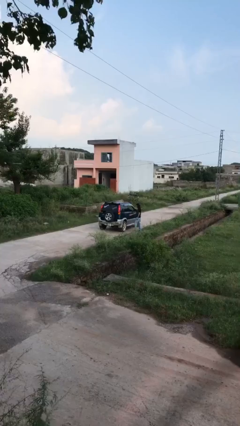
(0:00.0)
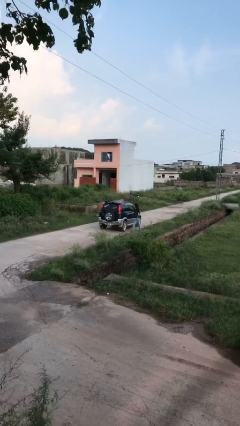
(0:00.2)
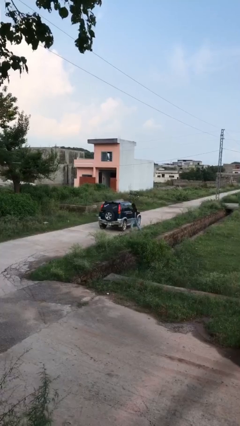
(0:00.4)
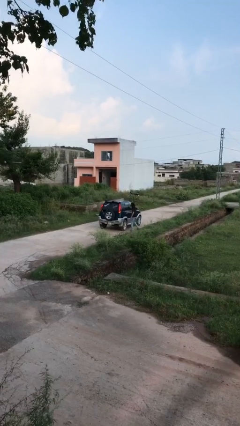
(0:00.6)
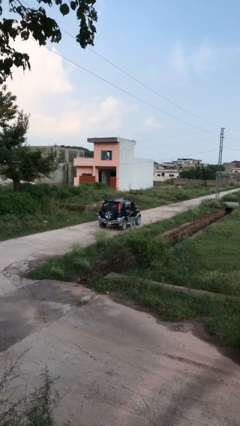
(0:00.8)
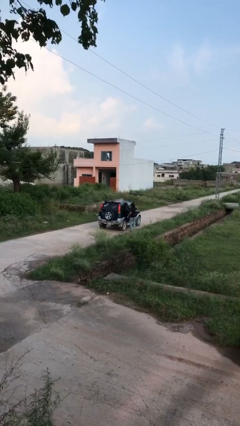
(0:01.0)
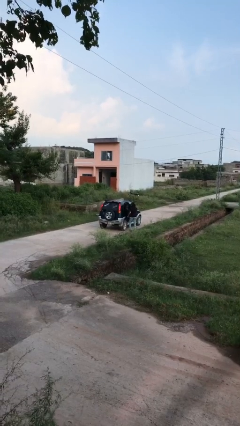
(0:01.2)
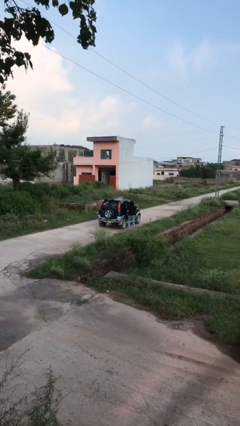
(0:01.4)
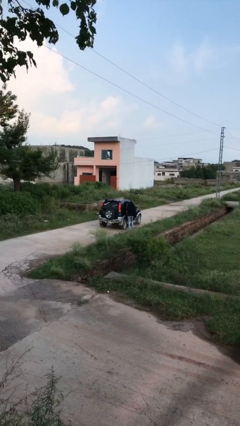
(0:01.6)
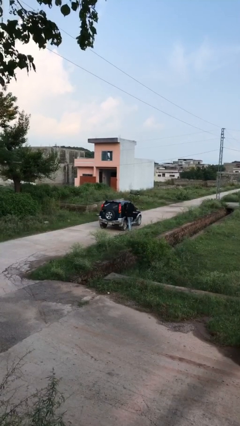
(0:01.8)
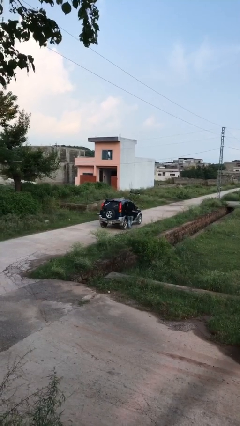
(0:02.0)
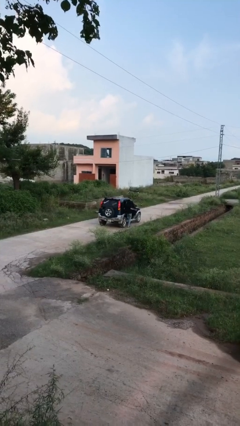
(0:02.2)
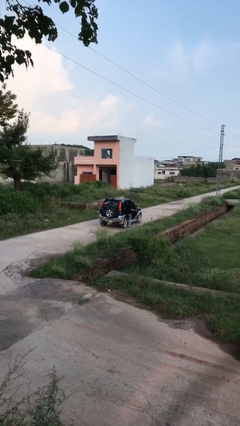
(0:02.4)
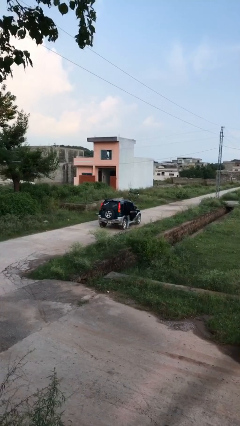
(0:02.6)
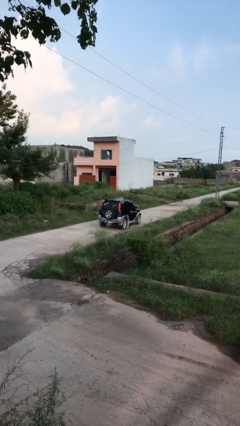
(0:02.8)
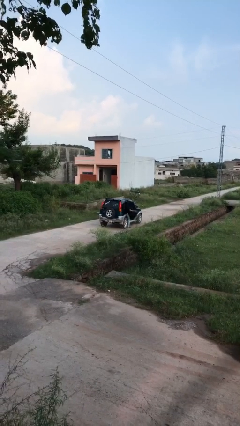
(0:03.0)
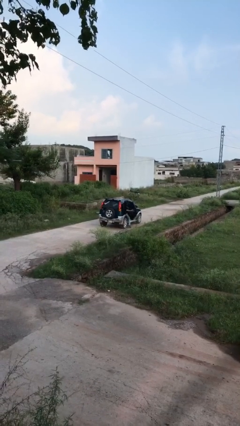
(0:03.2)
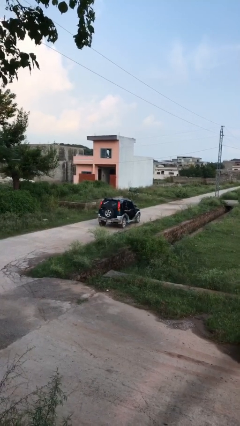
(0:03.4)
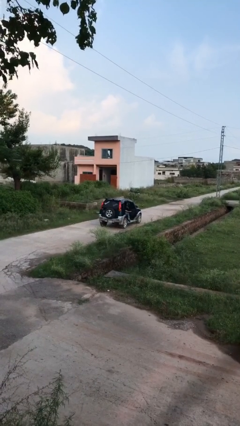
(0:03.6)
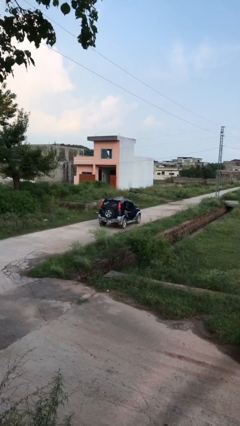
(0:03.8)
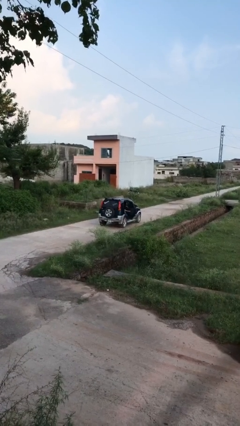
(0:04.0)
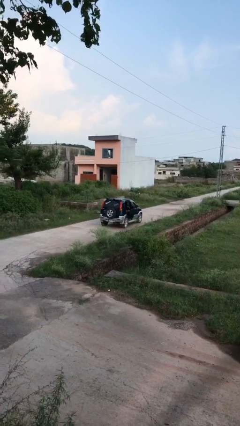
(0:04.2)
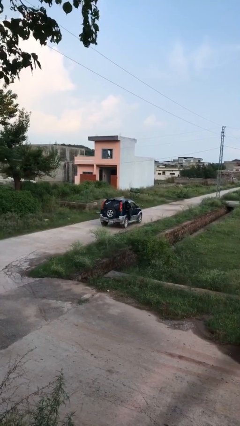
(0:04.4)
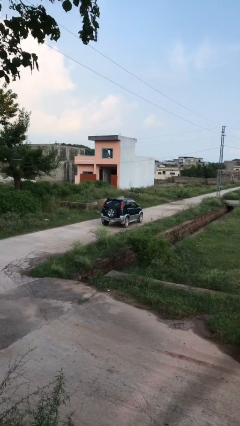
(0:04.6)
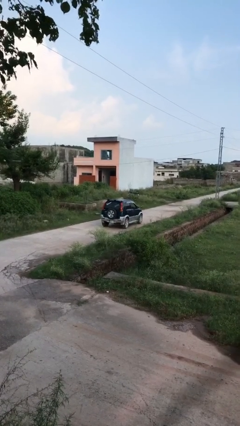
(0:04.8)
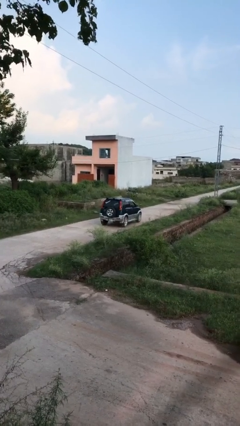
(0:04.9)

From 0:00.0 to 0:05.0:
car picks up person

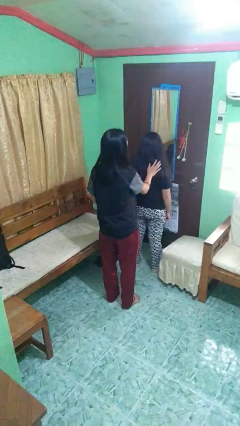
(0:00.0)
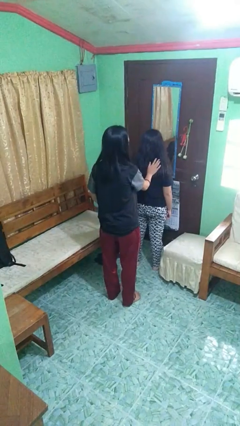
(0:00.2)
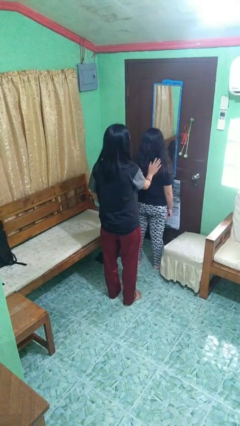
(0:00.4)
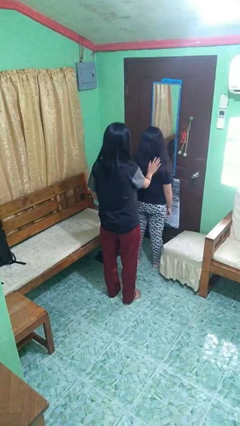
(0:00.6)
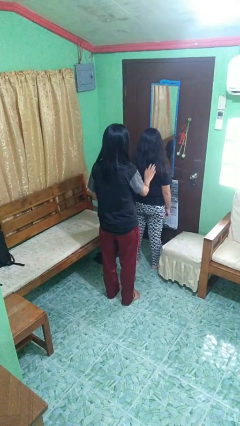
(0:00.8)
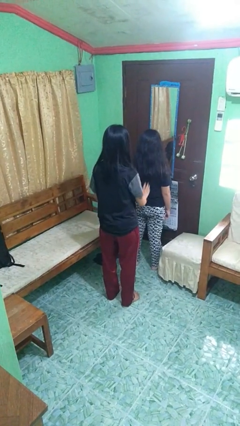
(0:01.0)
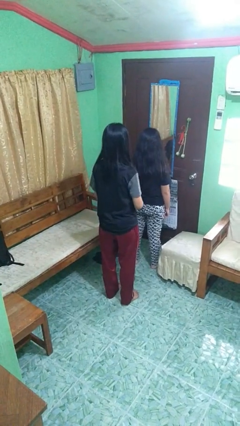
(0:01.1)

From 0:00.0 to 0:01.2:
person touches back of person

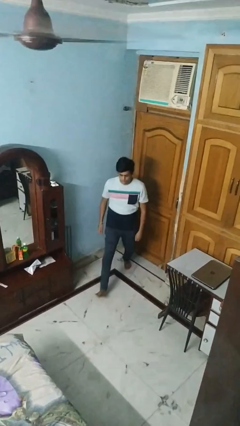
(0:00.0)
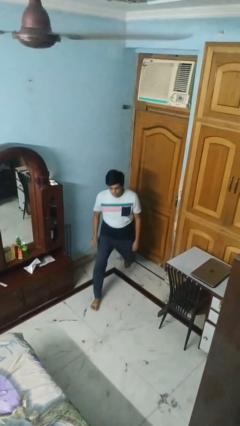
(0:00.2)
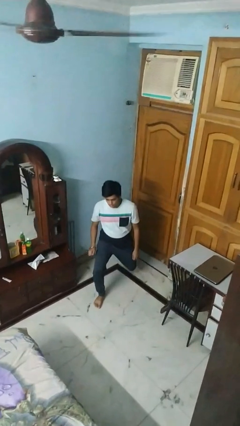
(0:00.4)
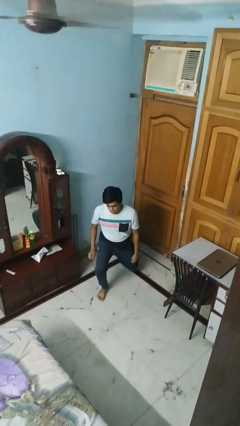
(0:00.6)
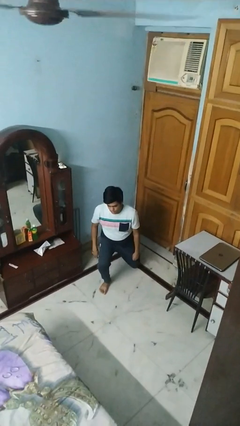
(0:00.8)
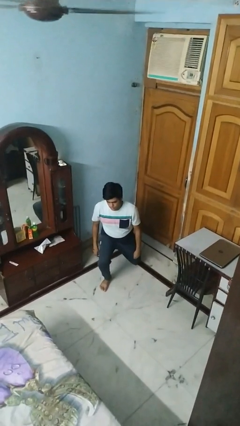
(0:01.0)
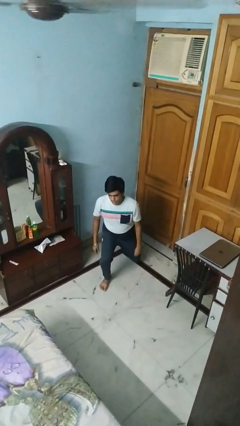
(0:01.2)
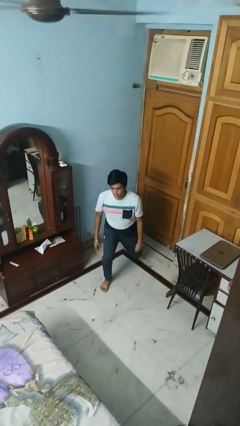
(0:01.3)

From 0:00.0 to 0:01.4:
person exercises with lunges

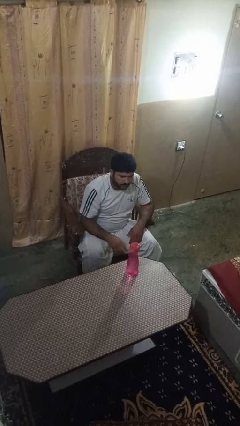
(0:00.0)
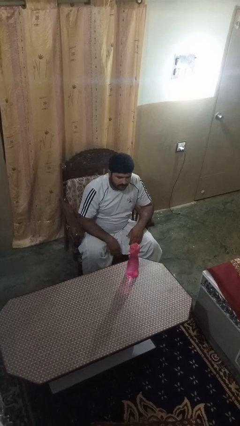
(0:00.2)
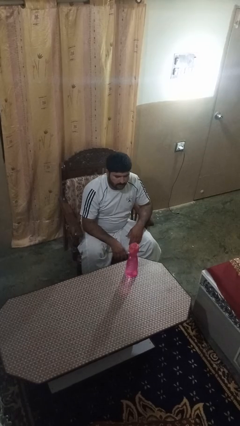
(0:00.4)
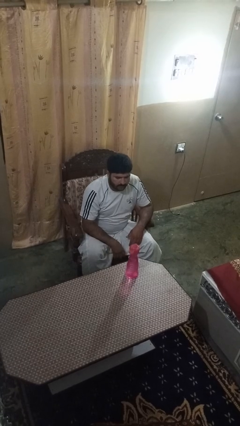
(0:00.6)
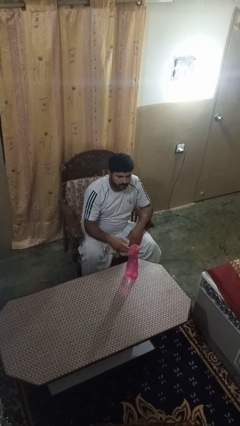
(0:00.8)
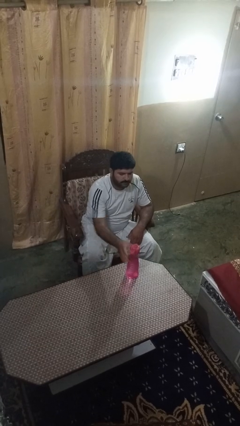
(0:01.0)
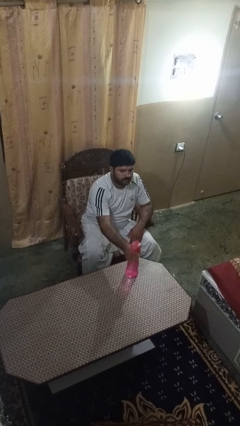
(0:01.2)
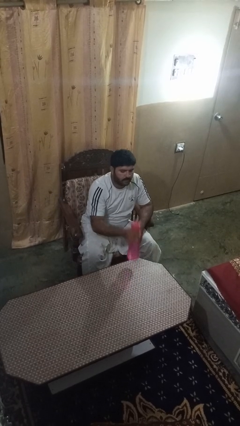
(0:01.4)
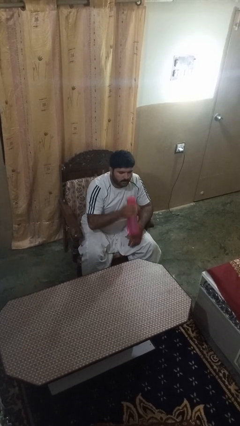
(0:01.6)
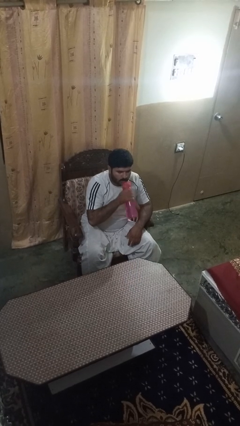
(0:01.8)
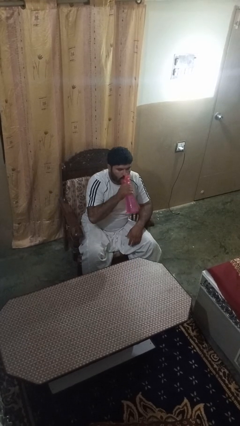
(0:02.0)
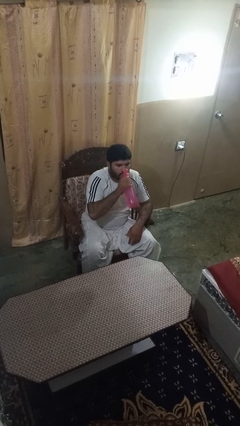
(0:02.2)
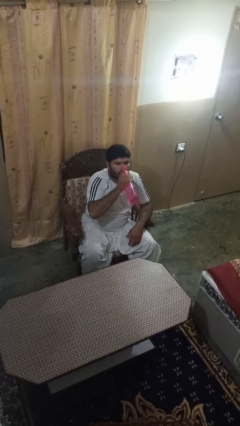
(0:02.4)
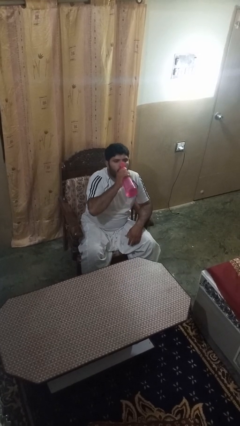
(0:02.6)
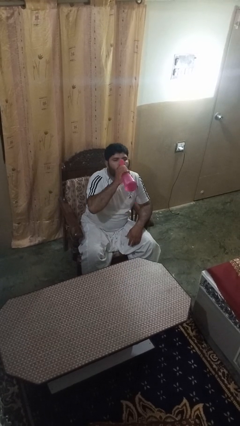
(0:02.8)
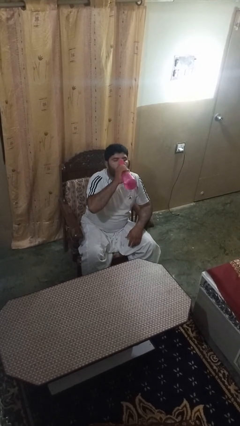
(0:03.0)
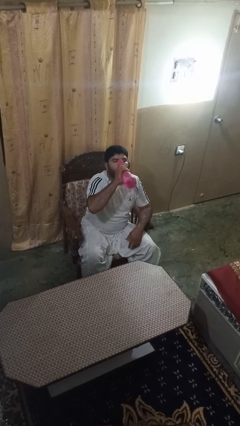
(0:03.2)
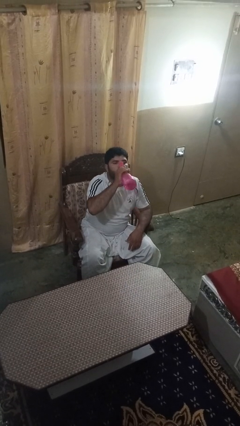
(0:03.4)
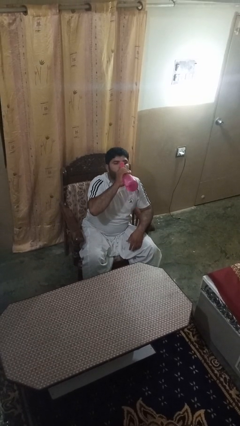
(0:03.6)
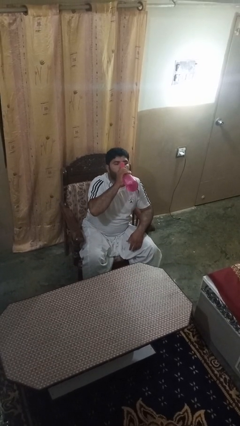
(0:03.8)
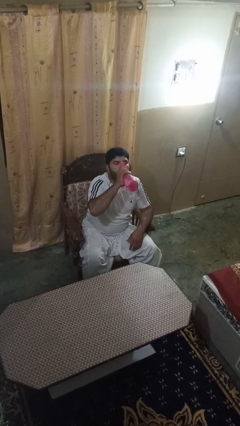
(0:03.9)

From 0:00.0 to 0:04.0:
person drinks from bottle

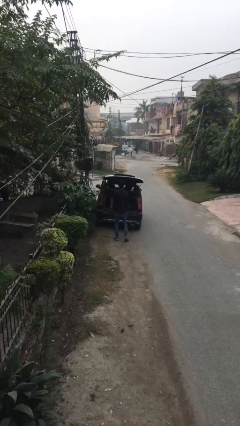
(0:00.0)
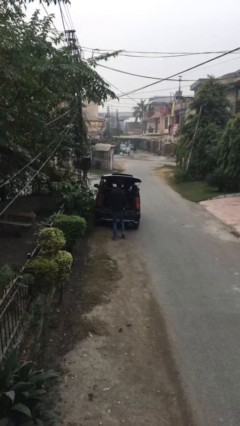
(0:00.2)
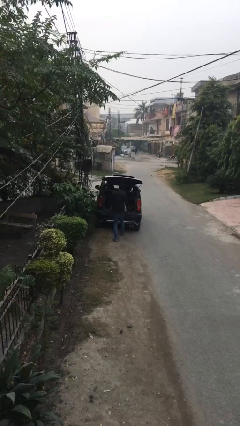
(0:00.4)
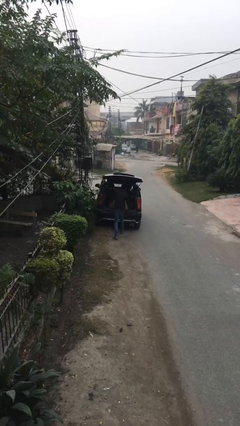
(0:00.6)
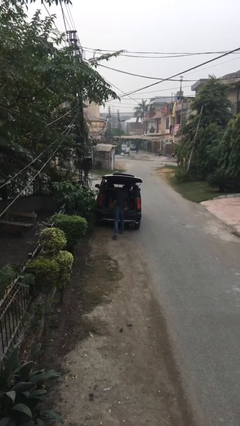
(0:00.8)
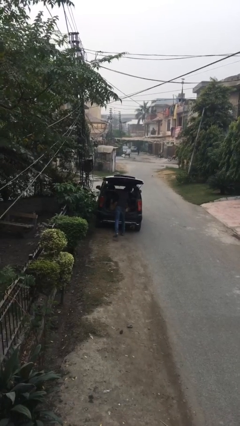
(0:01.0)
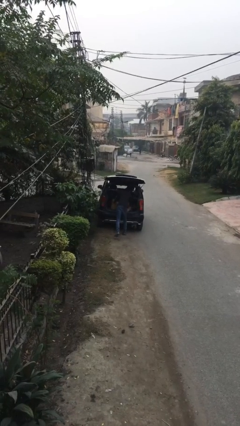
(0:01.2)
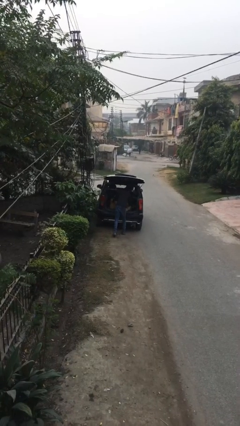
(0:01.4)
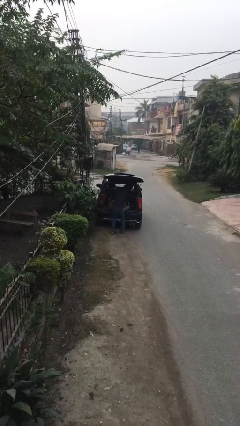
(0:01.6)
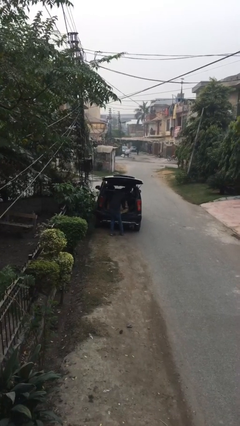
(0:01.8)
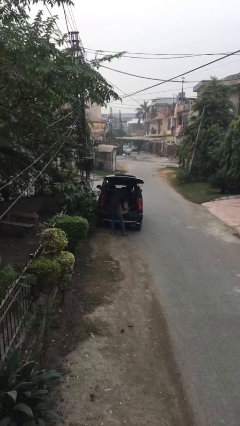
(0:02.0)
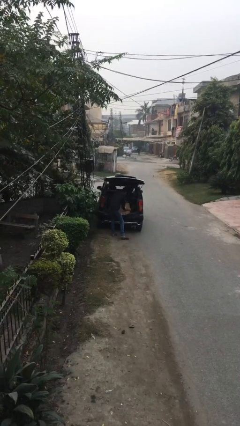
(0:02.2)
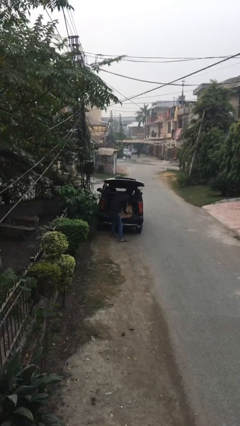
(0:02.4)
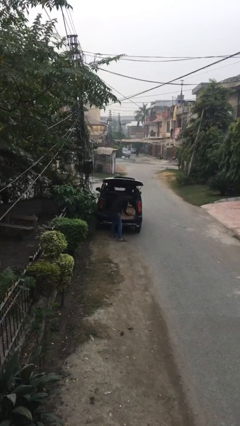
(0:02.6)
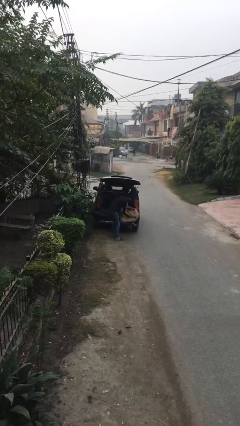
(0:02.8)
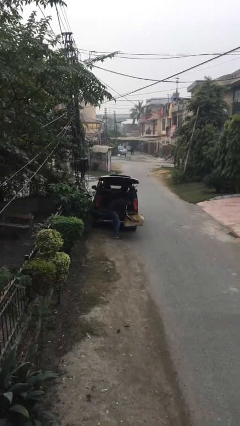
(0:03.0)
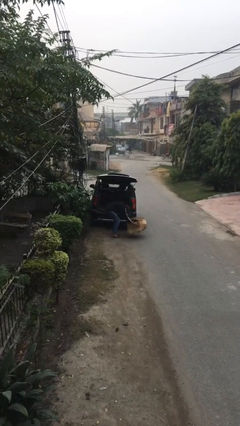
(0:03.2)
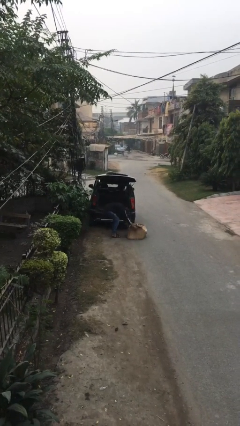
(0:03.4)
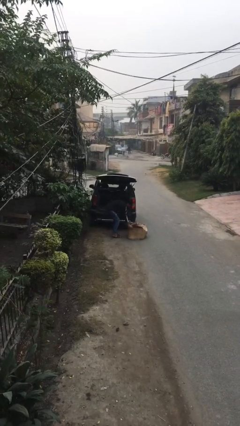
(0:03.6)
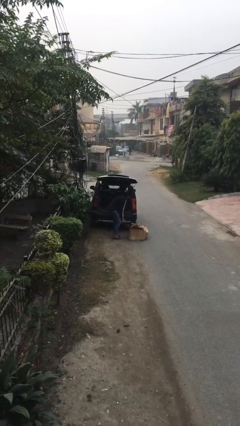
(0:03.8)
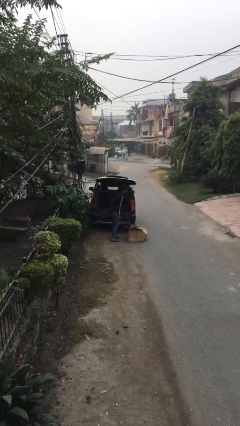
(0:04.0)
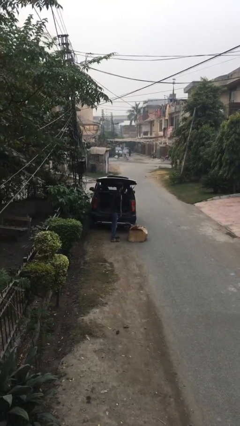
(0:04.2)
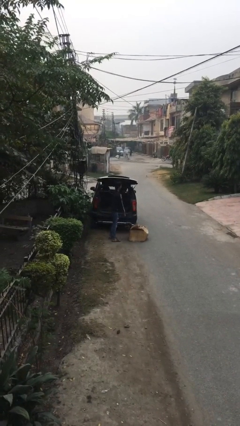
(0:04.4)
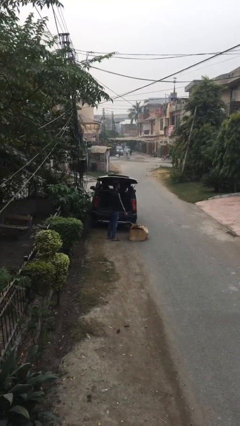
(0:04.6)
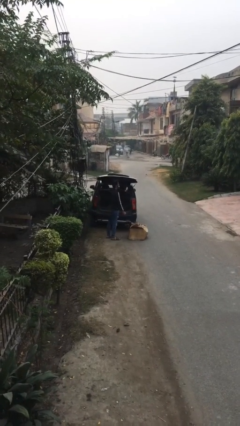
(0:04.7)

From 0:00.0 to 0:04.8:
person unloads car

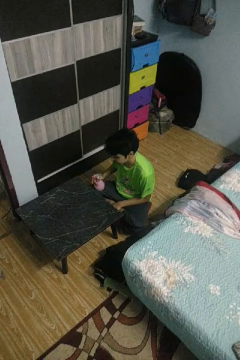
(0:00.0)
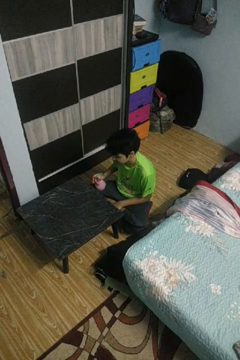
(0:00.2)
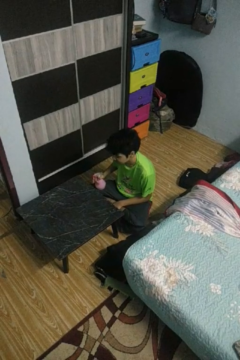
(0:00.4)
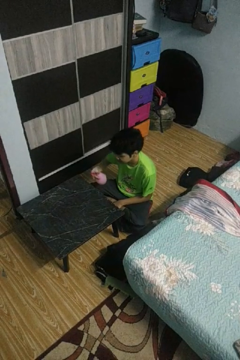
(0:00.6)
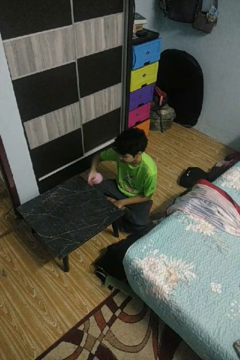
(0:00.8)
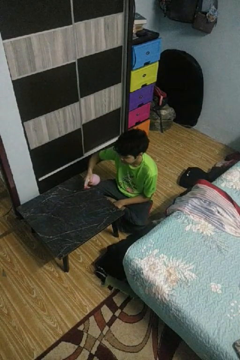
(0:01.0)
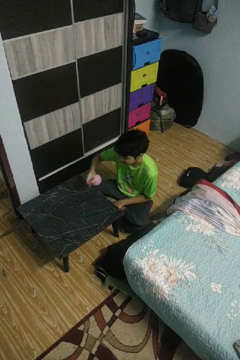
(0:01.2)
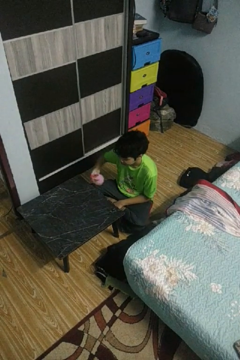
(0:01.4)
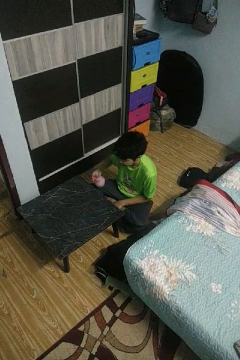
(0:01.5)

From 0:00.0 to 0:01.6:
person sprays from bottle
